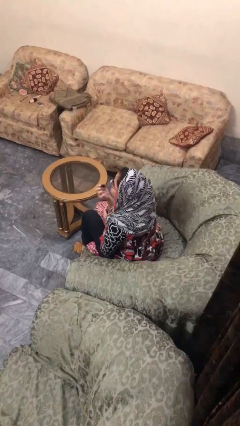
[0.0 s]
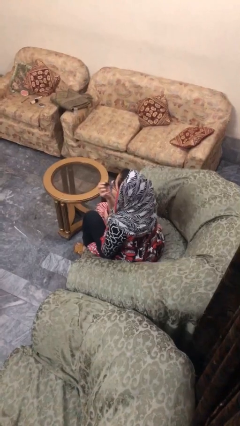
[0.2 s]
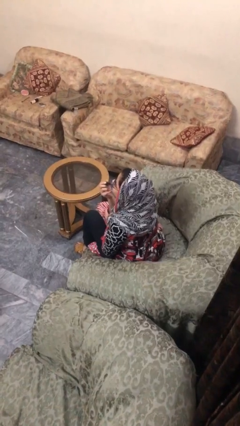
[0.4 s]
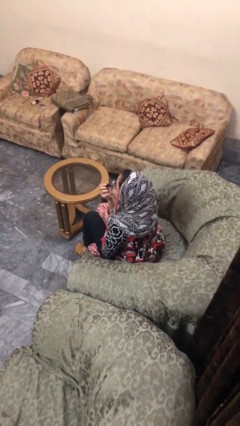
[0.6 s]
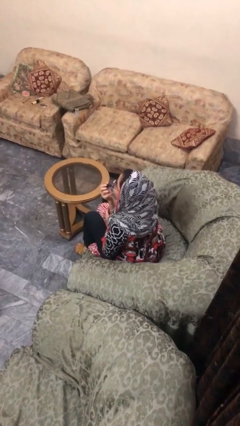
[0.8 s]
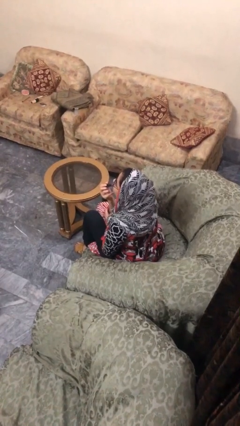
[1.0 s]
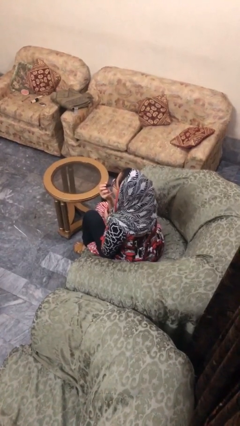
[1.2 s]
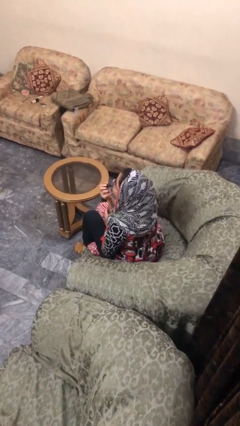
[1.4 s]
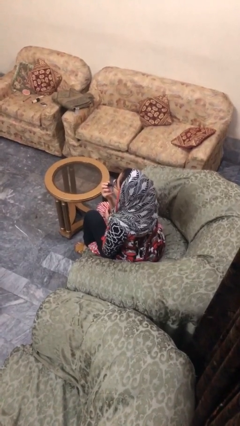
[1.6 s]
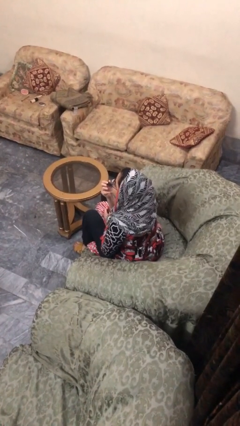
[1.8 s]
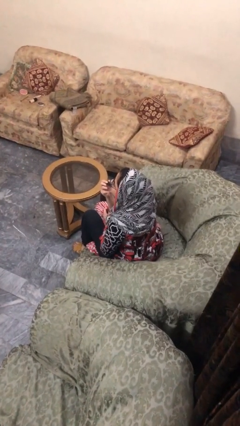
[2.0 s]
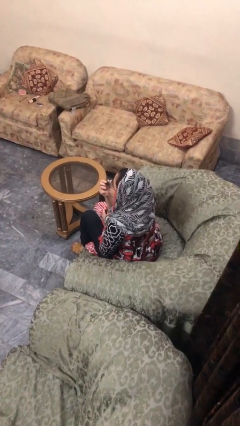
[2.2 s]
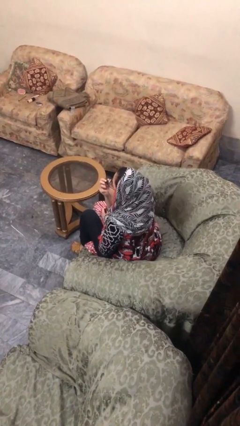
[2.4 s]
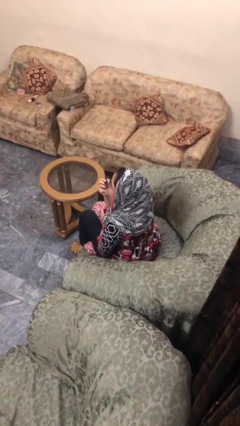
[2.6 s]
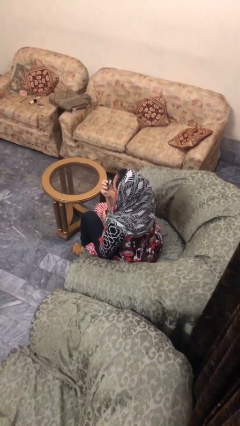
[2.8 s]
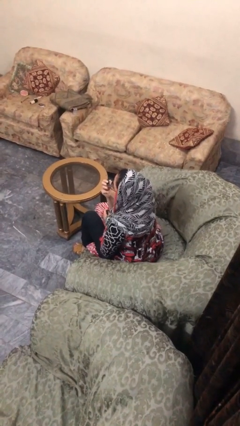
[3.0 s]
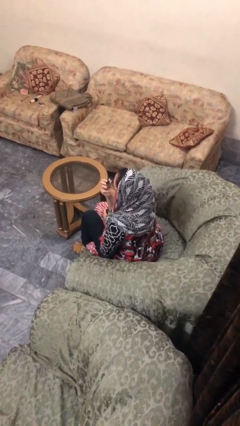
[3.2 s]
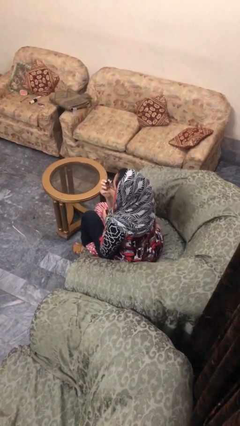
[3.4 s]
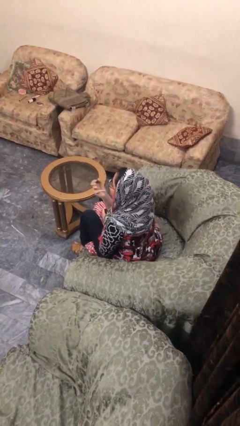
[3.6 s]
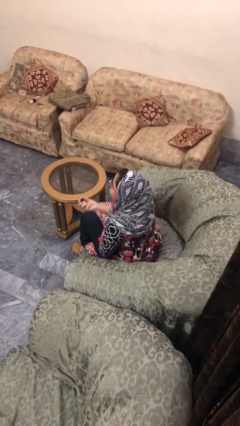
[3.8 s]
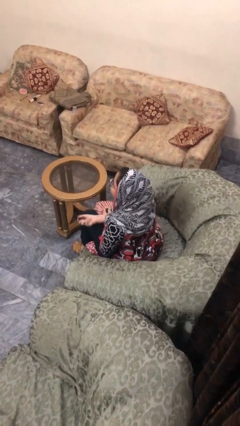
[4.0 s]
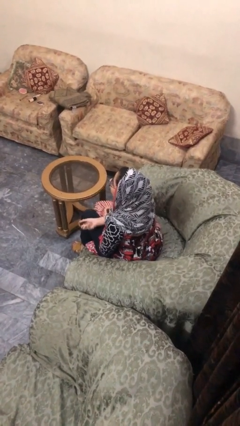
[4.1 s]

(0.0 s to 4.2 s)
person applies lip makeup

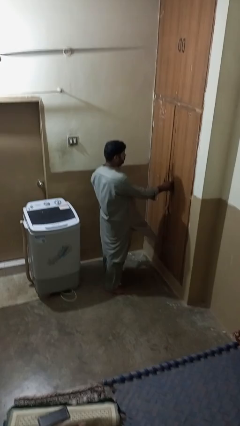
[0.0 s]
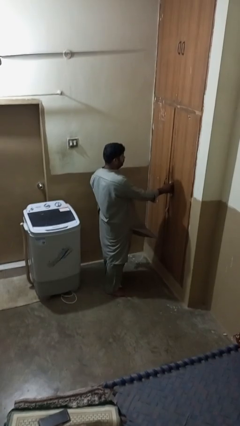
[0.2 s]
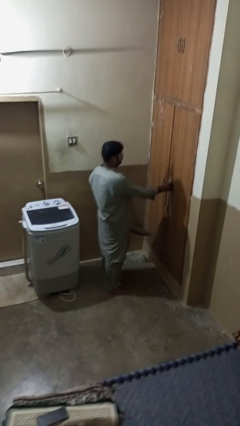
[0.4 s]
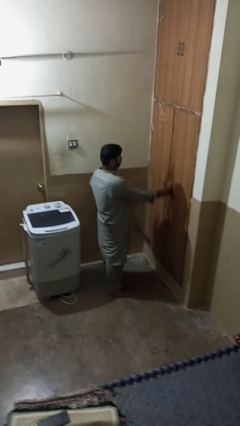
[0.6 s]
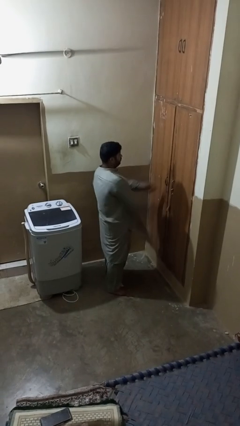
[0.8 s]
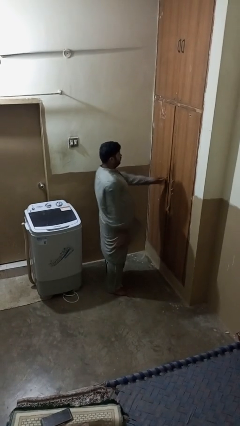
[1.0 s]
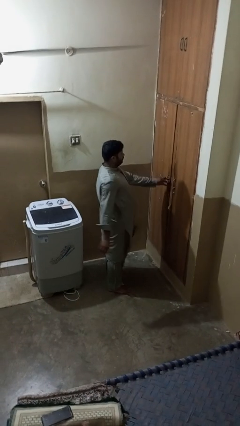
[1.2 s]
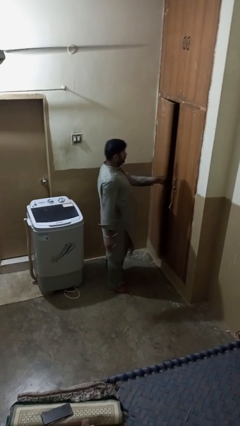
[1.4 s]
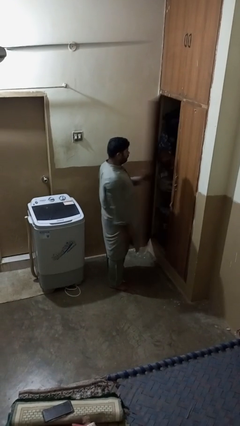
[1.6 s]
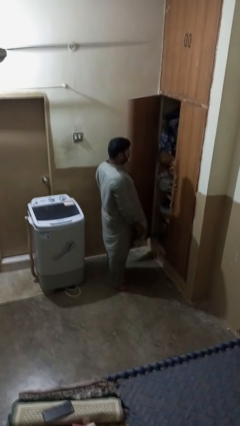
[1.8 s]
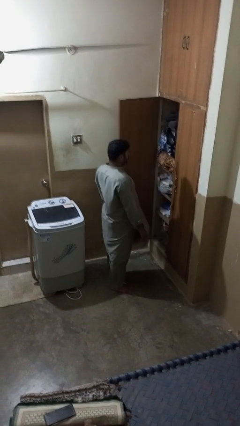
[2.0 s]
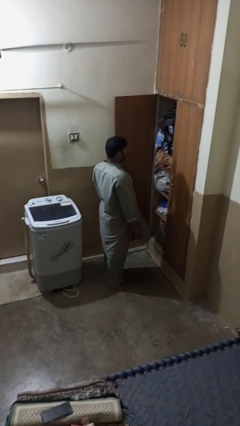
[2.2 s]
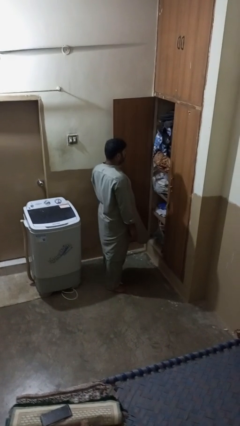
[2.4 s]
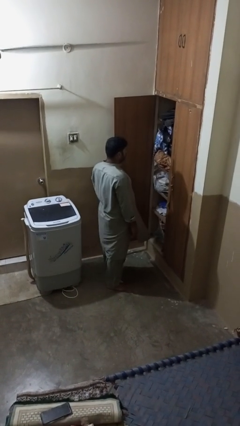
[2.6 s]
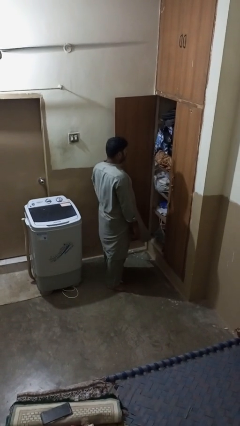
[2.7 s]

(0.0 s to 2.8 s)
person opens closet door

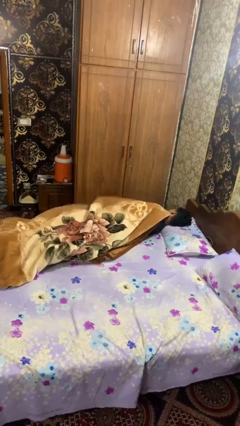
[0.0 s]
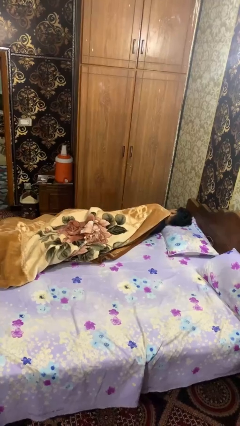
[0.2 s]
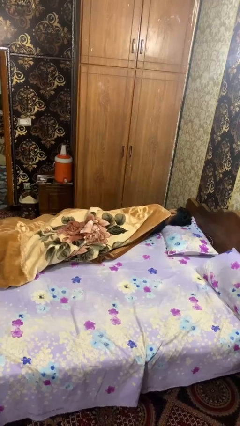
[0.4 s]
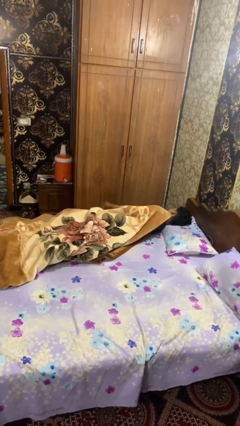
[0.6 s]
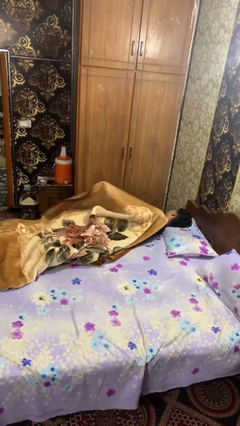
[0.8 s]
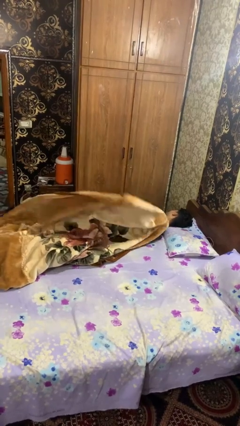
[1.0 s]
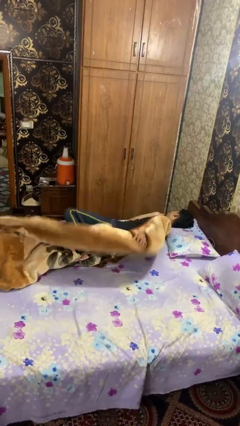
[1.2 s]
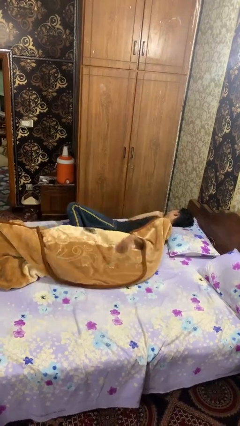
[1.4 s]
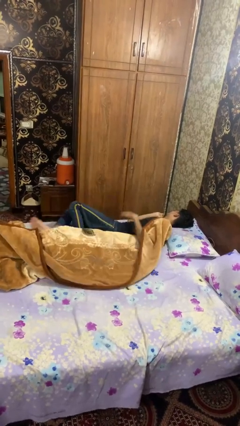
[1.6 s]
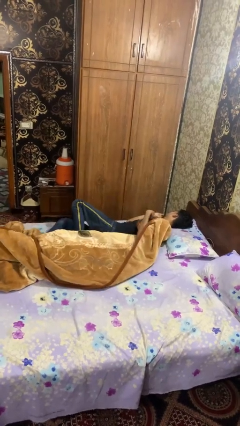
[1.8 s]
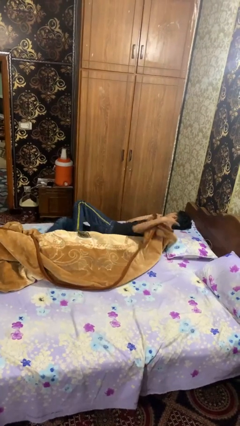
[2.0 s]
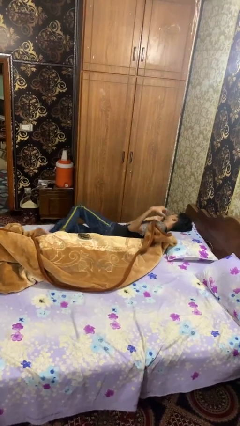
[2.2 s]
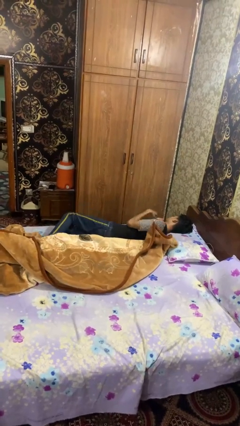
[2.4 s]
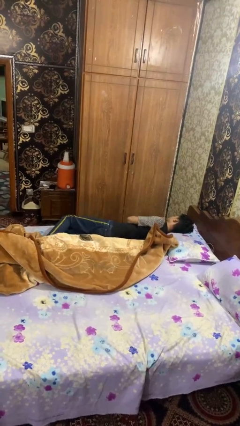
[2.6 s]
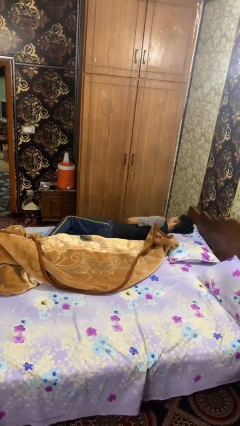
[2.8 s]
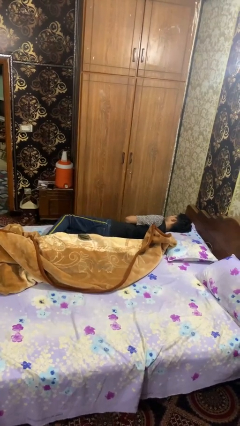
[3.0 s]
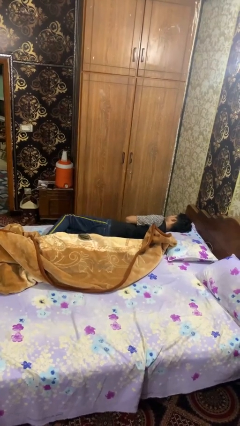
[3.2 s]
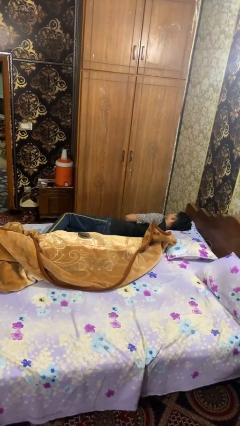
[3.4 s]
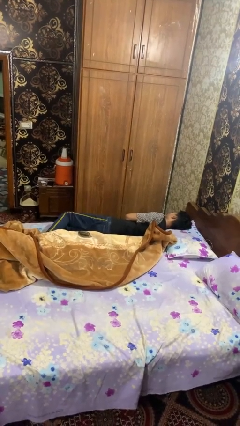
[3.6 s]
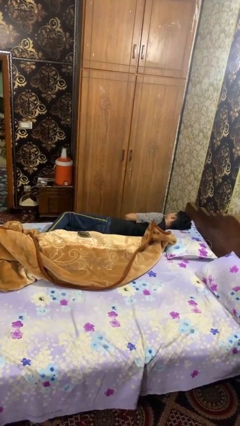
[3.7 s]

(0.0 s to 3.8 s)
person uncovers with blanket

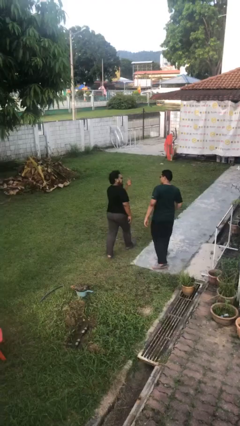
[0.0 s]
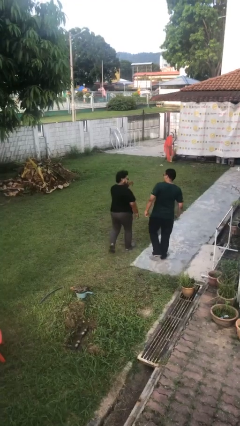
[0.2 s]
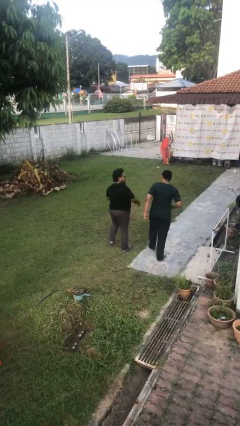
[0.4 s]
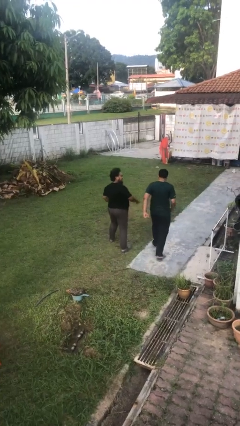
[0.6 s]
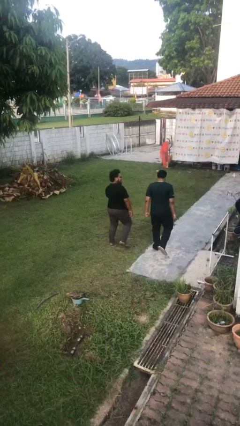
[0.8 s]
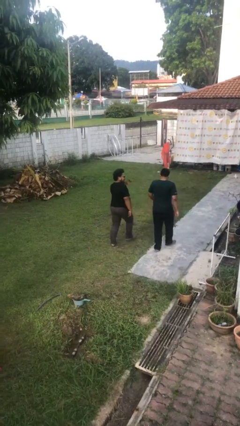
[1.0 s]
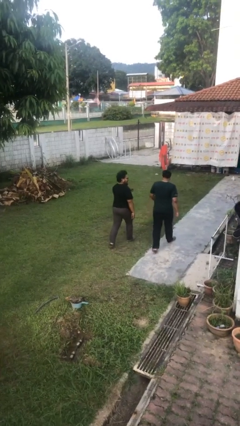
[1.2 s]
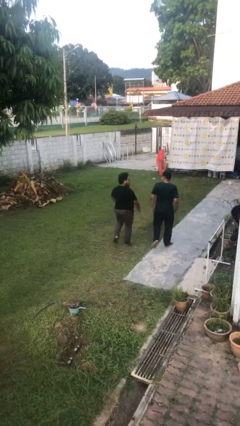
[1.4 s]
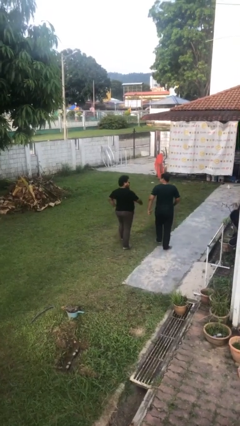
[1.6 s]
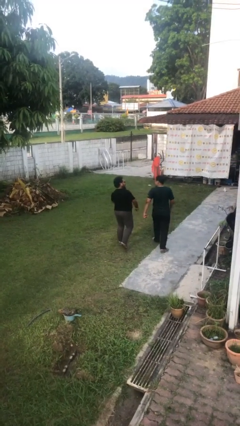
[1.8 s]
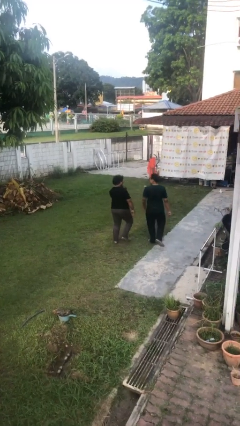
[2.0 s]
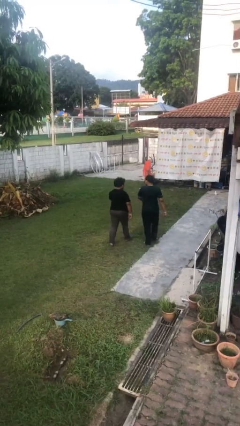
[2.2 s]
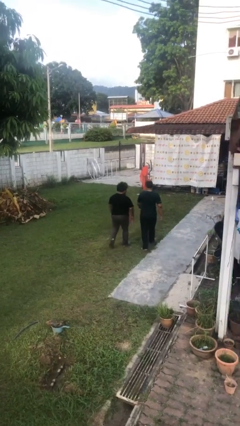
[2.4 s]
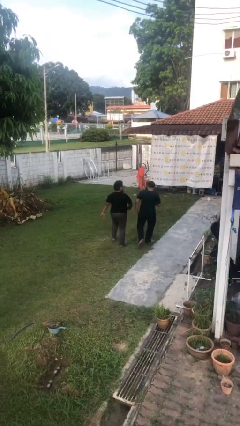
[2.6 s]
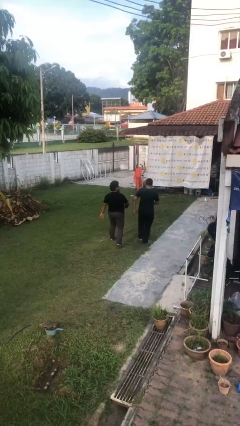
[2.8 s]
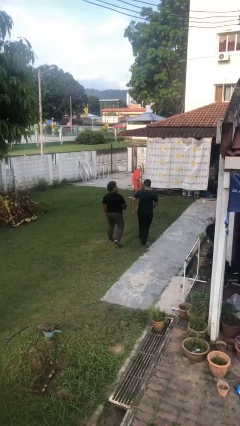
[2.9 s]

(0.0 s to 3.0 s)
person talks to person

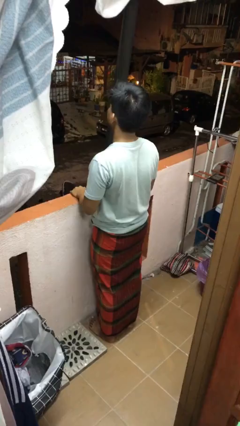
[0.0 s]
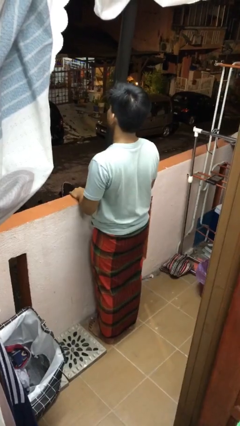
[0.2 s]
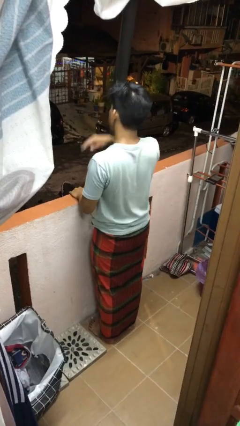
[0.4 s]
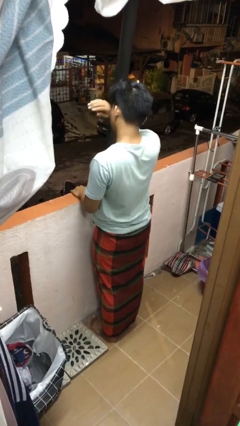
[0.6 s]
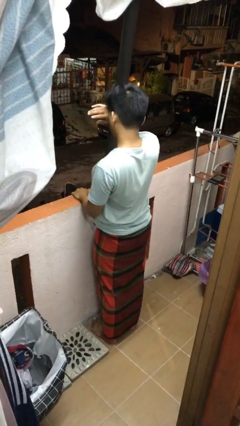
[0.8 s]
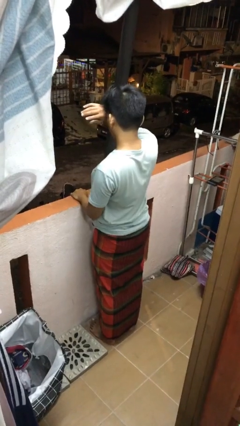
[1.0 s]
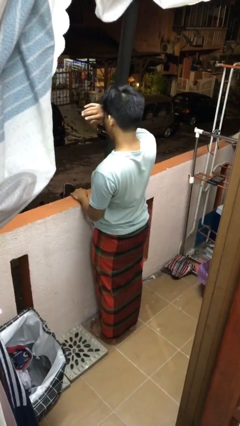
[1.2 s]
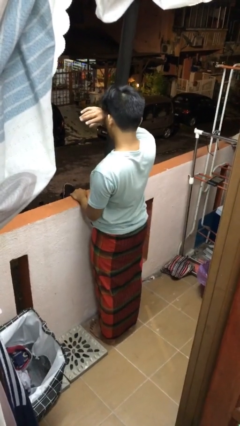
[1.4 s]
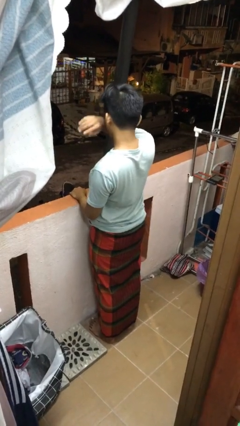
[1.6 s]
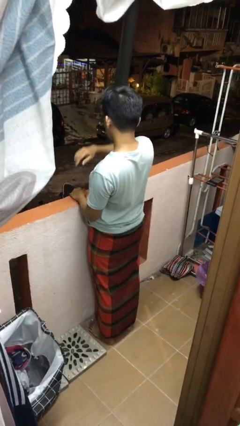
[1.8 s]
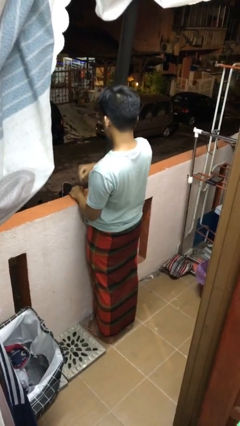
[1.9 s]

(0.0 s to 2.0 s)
person rubs eyes

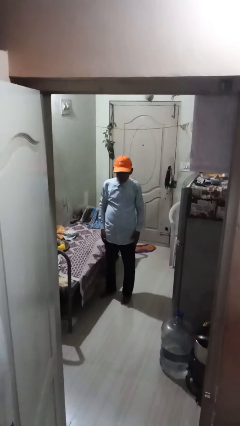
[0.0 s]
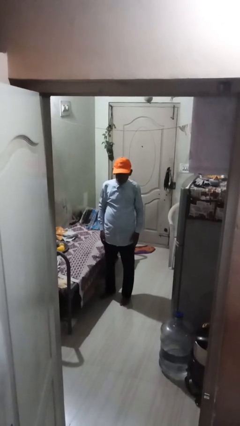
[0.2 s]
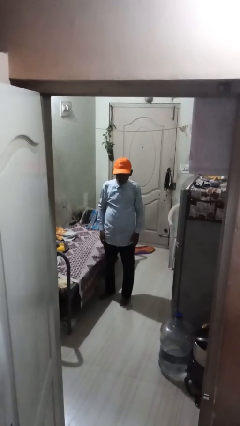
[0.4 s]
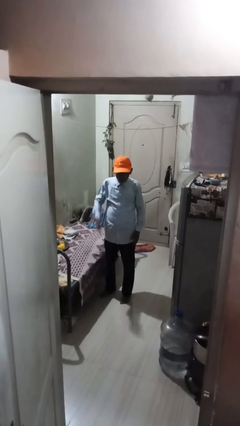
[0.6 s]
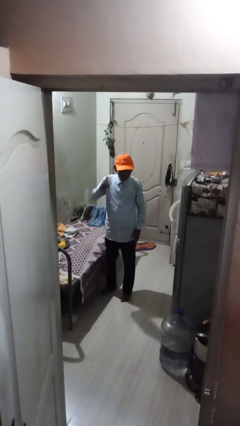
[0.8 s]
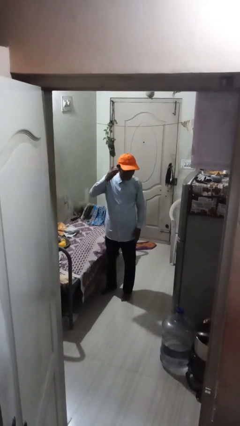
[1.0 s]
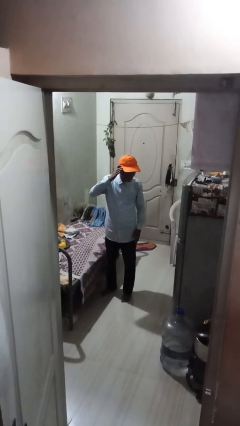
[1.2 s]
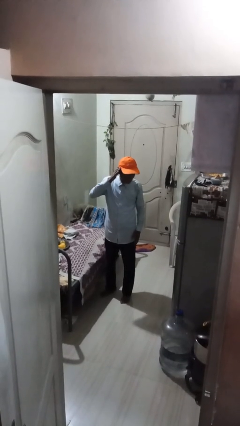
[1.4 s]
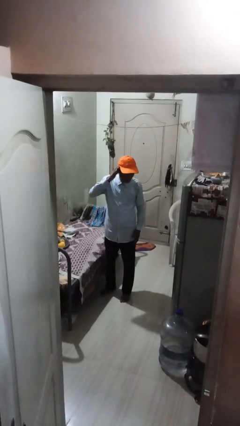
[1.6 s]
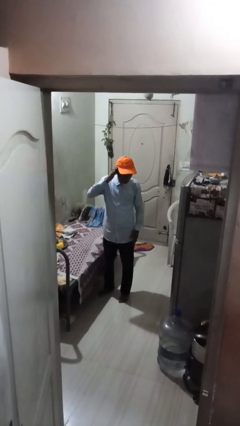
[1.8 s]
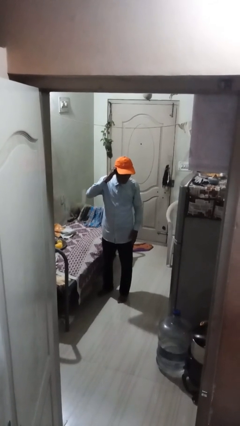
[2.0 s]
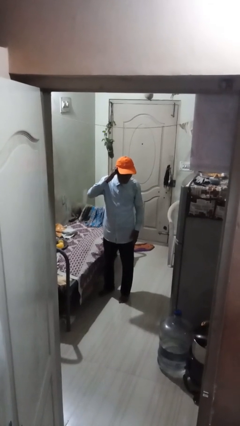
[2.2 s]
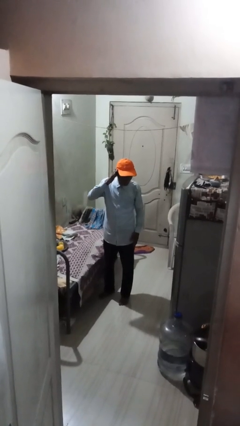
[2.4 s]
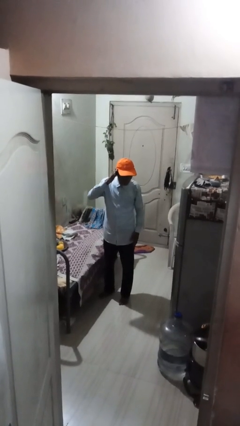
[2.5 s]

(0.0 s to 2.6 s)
person gestures listen closely
